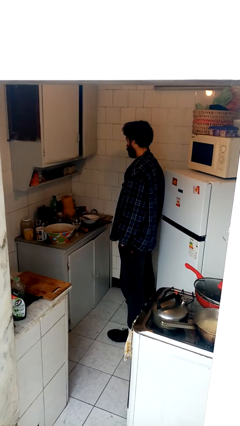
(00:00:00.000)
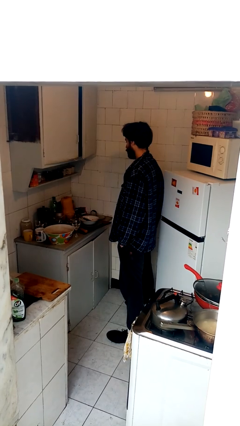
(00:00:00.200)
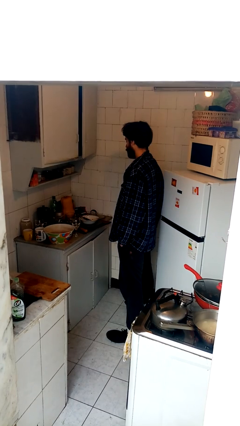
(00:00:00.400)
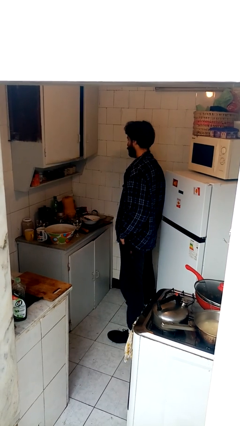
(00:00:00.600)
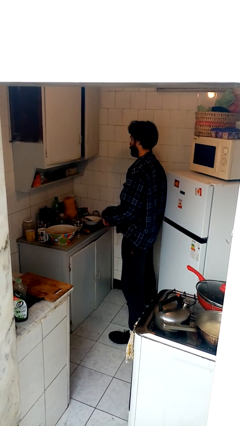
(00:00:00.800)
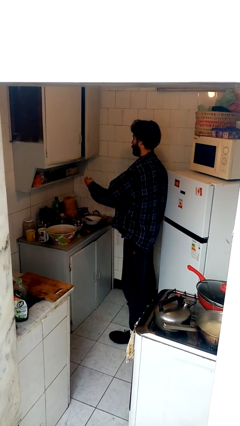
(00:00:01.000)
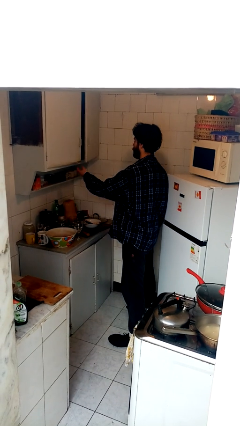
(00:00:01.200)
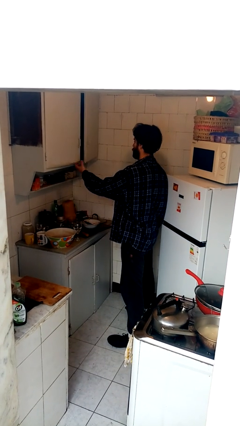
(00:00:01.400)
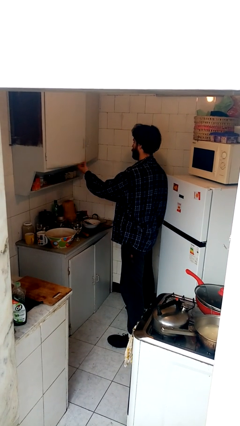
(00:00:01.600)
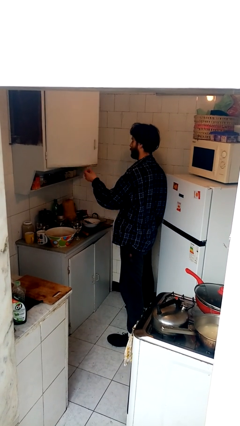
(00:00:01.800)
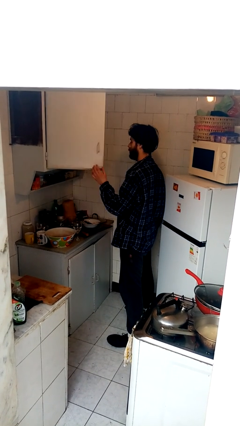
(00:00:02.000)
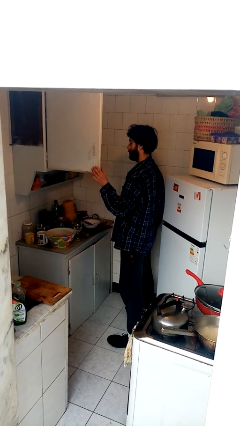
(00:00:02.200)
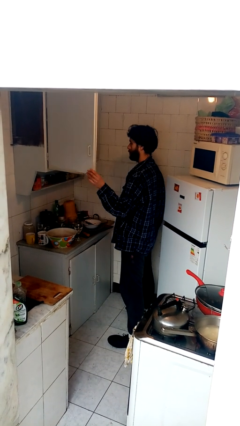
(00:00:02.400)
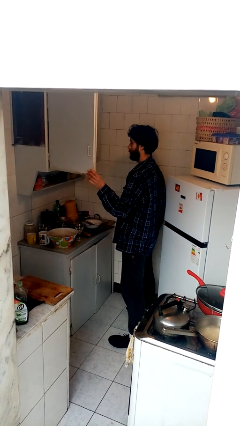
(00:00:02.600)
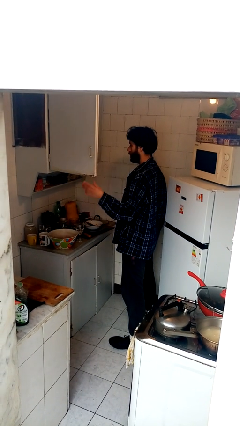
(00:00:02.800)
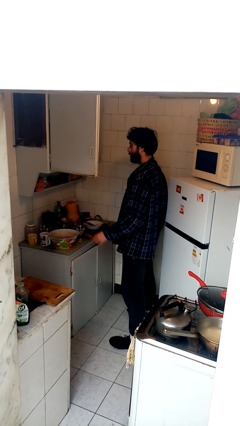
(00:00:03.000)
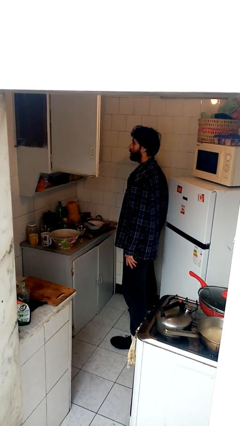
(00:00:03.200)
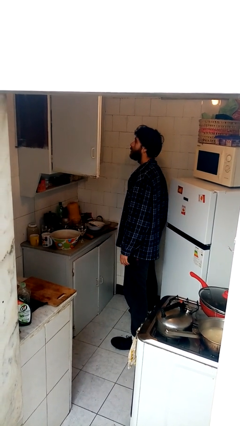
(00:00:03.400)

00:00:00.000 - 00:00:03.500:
person opens cabinet

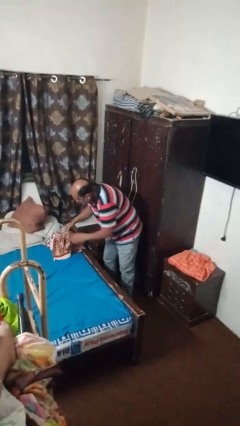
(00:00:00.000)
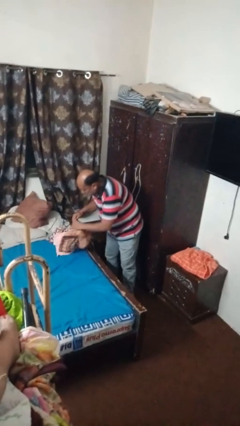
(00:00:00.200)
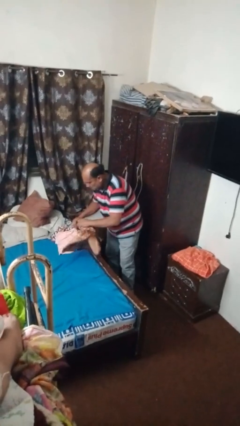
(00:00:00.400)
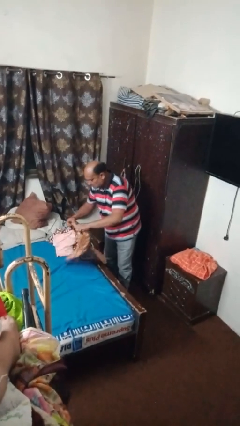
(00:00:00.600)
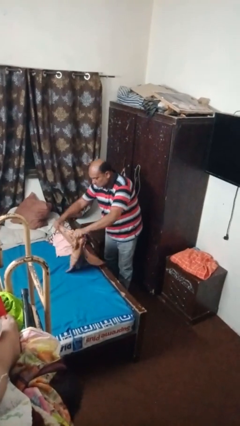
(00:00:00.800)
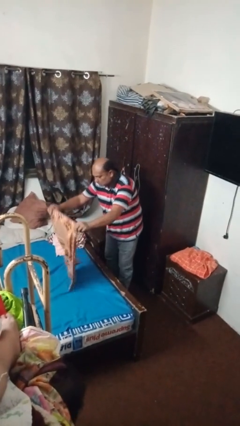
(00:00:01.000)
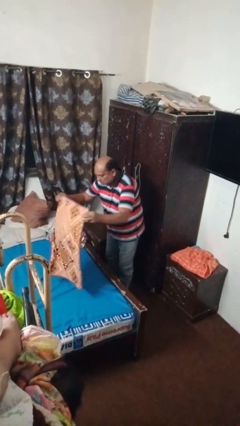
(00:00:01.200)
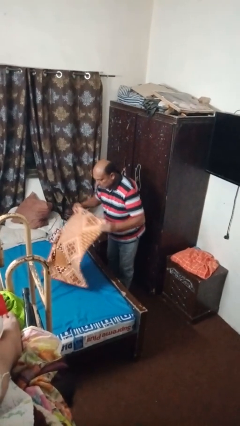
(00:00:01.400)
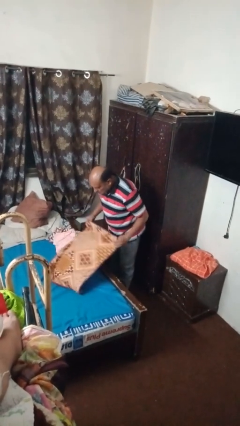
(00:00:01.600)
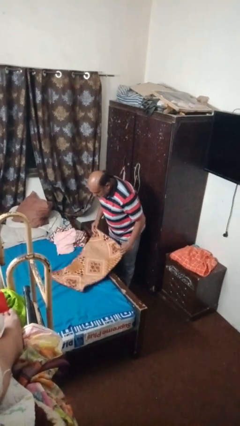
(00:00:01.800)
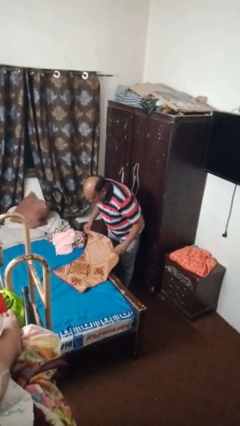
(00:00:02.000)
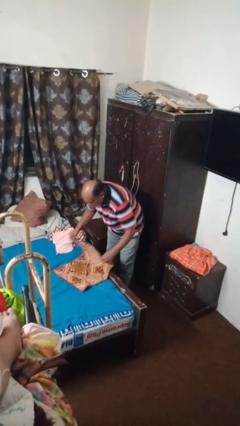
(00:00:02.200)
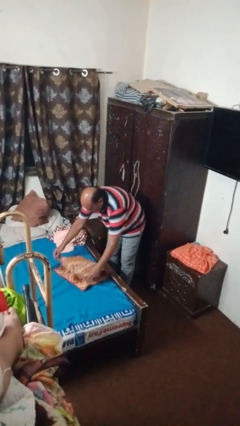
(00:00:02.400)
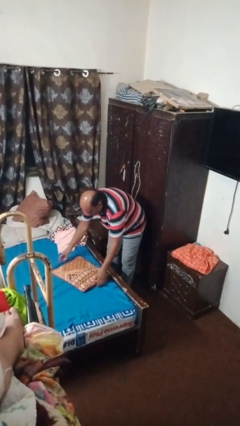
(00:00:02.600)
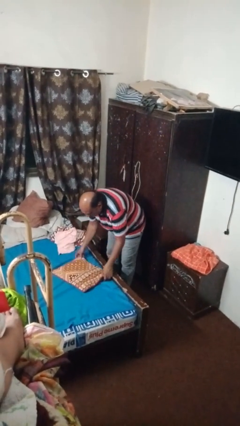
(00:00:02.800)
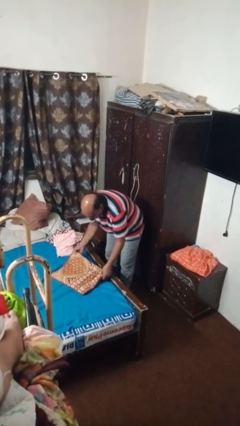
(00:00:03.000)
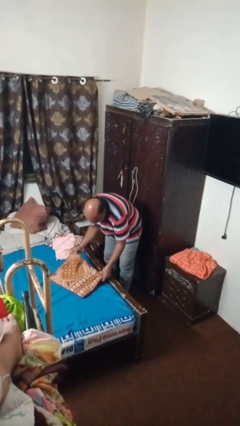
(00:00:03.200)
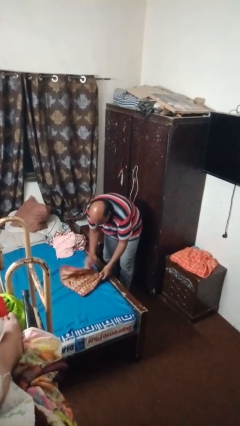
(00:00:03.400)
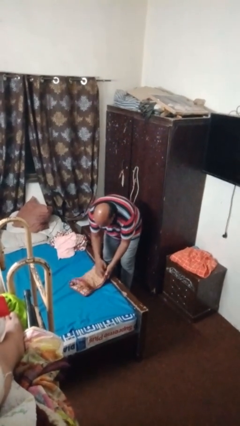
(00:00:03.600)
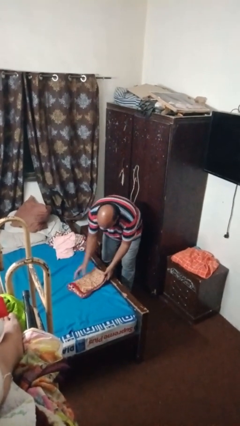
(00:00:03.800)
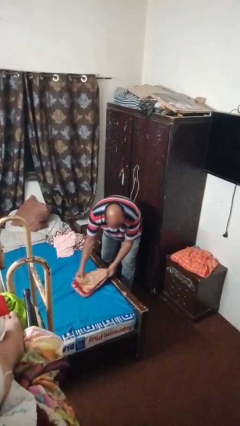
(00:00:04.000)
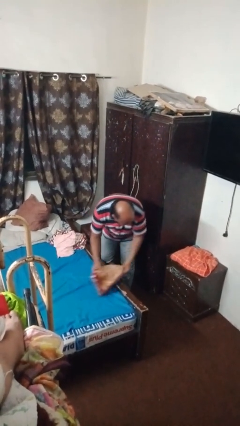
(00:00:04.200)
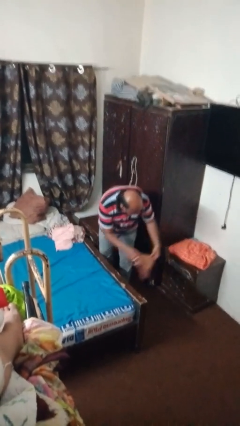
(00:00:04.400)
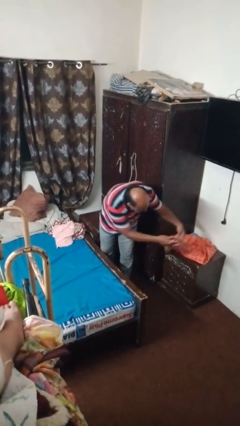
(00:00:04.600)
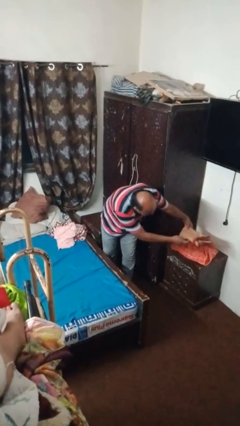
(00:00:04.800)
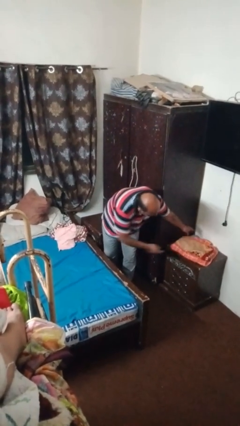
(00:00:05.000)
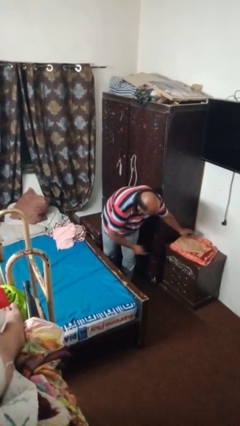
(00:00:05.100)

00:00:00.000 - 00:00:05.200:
person folds towel

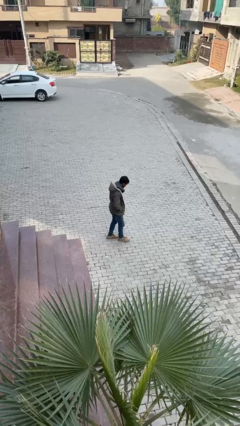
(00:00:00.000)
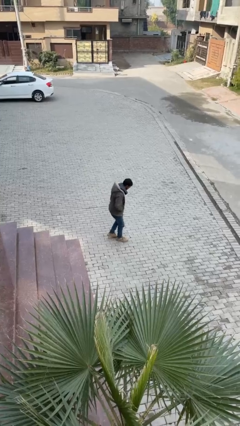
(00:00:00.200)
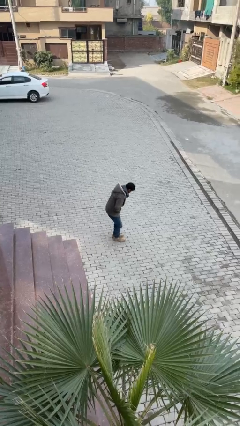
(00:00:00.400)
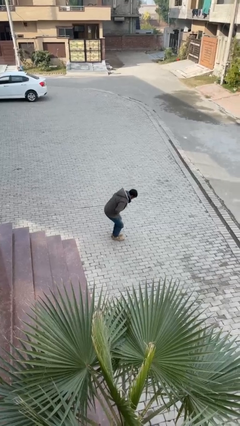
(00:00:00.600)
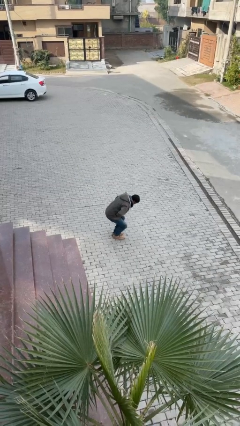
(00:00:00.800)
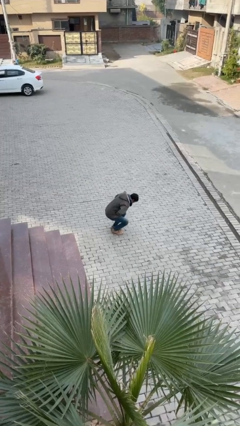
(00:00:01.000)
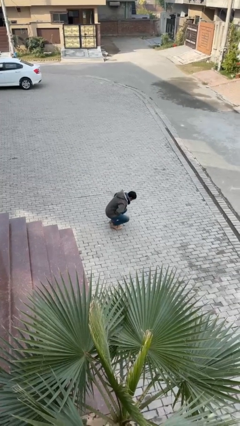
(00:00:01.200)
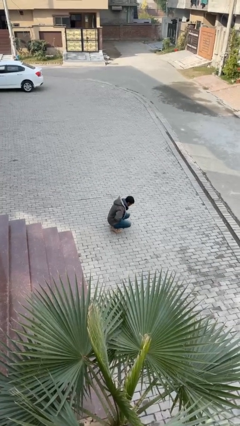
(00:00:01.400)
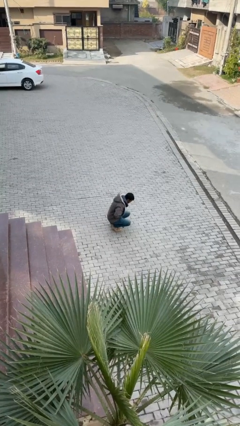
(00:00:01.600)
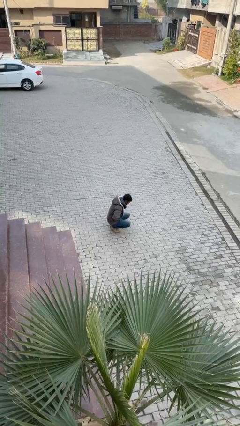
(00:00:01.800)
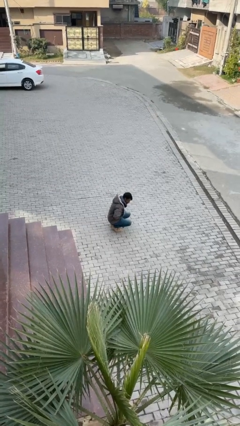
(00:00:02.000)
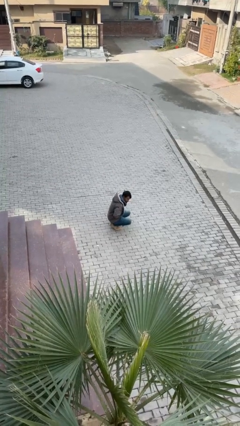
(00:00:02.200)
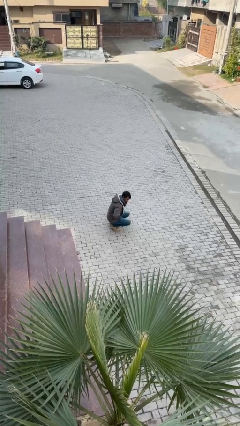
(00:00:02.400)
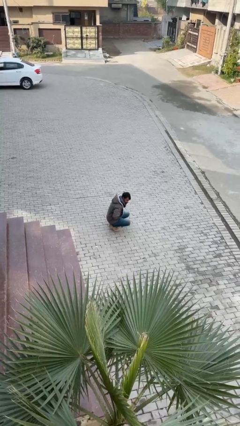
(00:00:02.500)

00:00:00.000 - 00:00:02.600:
person sits down

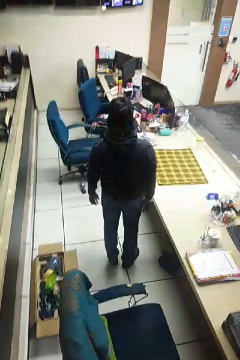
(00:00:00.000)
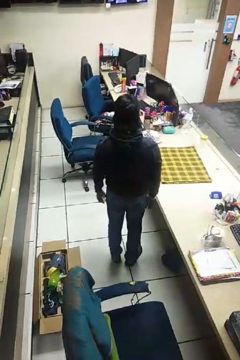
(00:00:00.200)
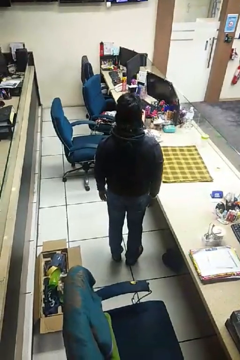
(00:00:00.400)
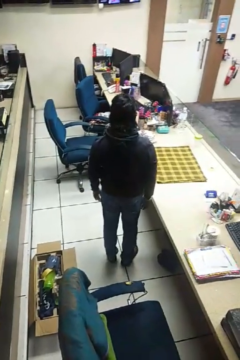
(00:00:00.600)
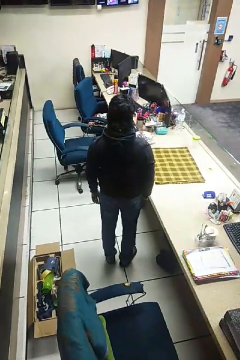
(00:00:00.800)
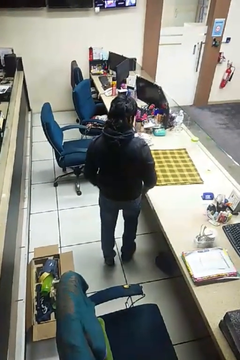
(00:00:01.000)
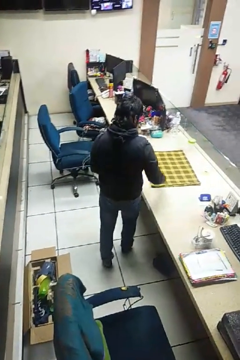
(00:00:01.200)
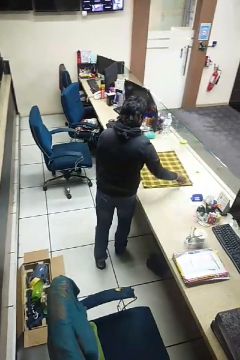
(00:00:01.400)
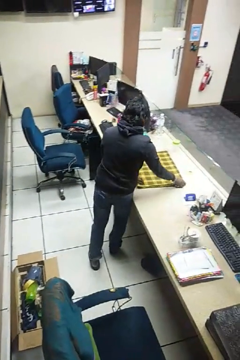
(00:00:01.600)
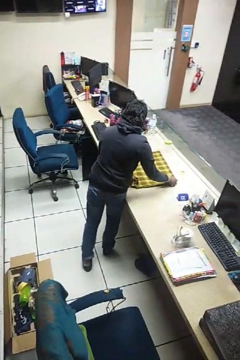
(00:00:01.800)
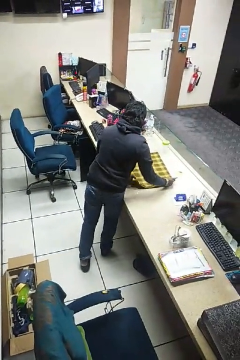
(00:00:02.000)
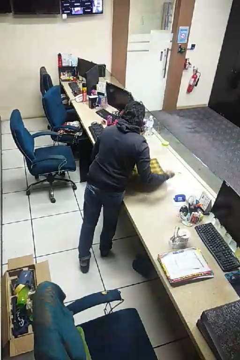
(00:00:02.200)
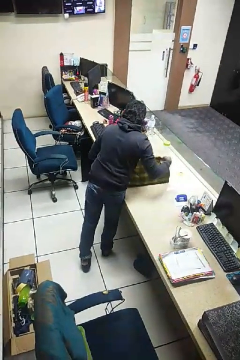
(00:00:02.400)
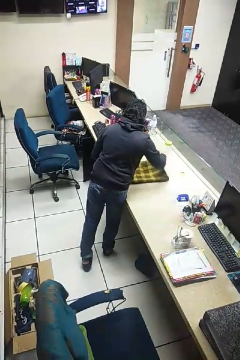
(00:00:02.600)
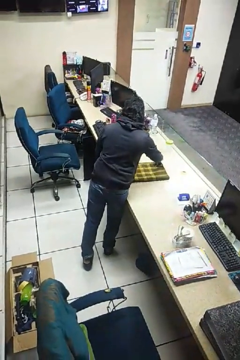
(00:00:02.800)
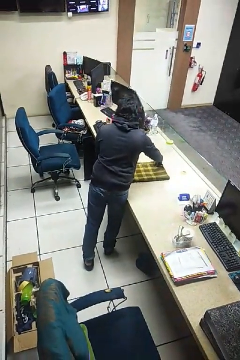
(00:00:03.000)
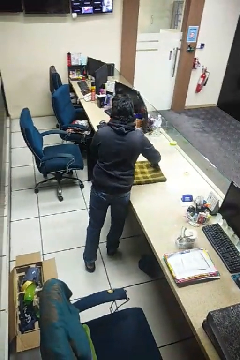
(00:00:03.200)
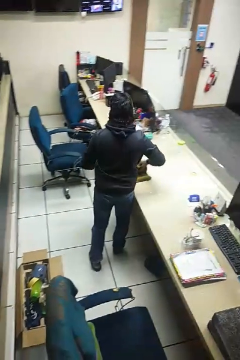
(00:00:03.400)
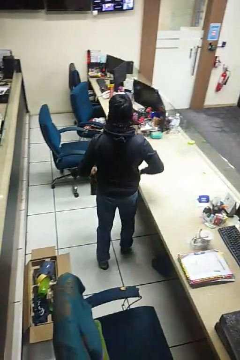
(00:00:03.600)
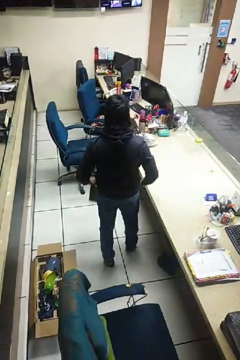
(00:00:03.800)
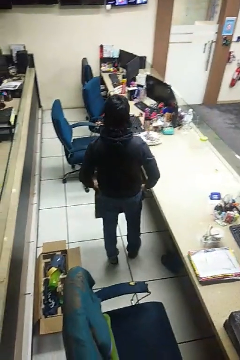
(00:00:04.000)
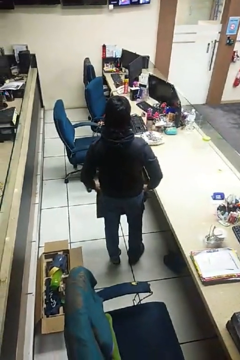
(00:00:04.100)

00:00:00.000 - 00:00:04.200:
person folds tablecloth

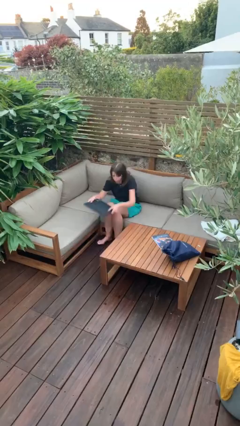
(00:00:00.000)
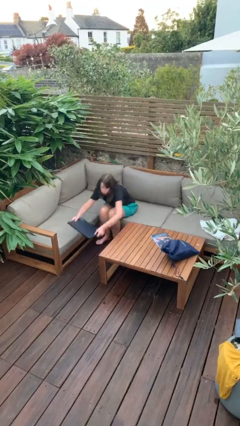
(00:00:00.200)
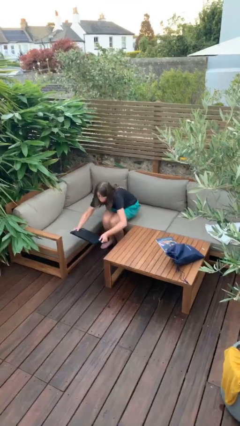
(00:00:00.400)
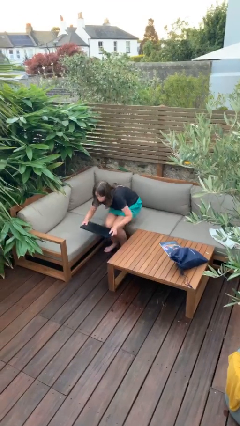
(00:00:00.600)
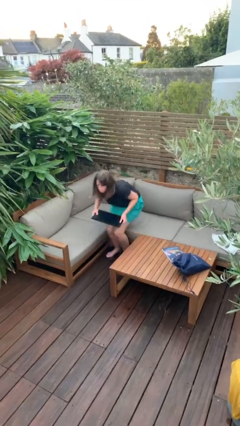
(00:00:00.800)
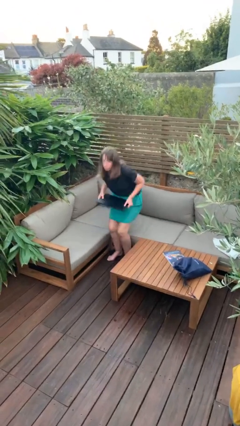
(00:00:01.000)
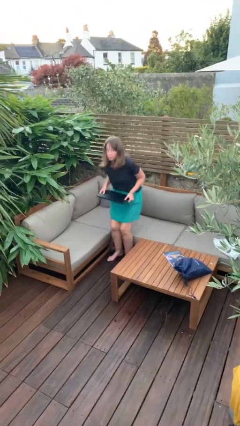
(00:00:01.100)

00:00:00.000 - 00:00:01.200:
person stands up

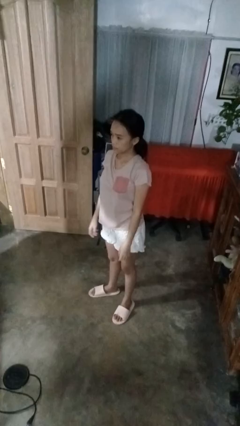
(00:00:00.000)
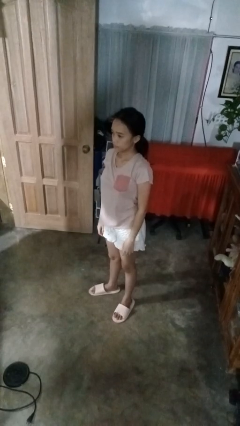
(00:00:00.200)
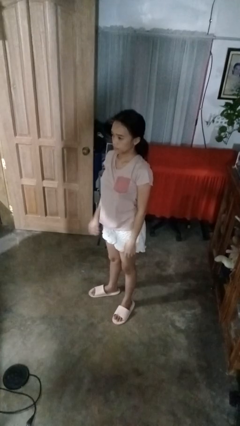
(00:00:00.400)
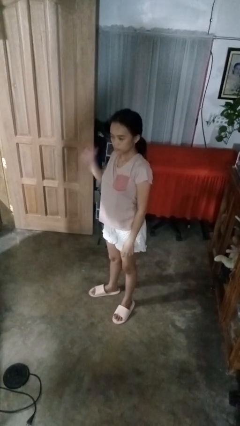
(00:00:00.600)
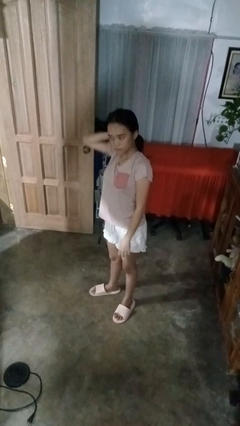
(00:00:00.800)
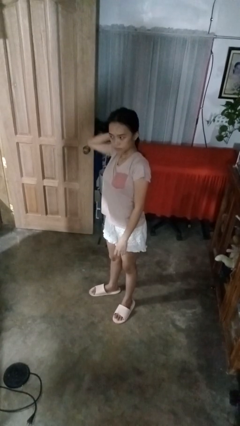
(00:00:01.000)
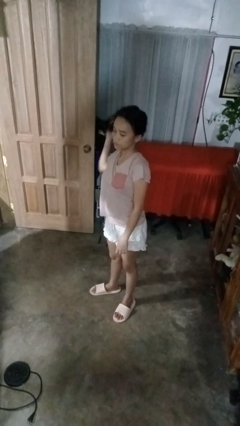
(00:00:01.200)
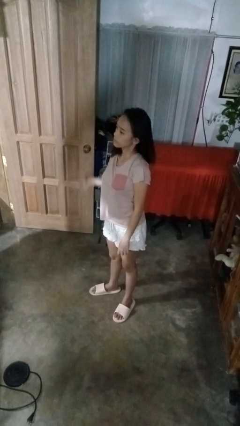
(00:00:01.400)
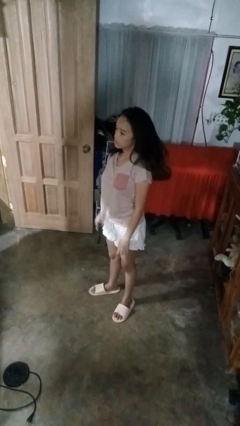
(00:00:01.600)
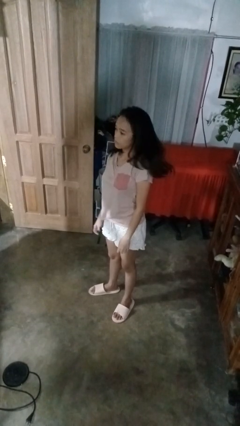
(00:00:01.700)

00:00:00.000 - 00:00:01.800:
person takes off hairtie
